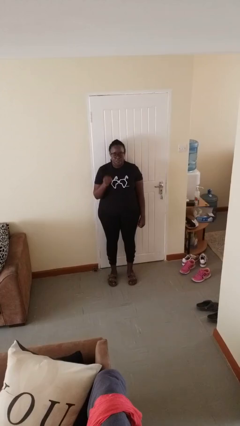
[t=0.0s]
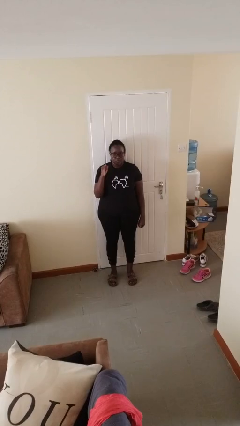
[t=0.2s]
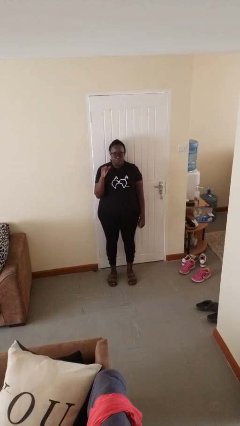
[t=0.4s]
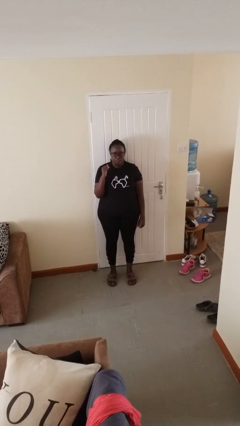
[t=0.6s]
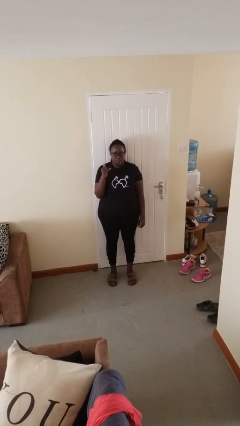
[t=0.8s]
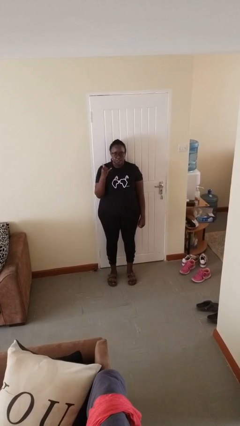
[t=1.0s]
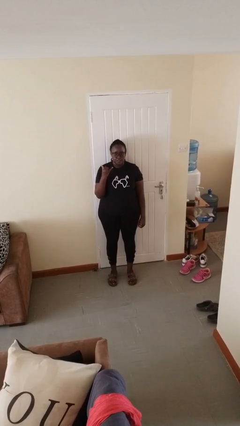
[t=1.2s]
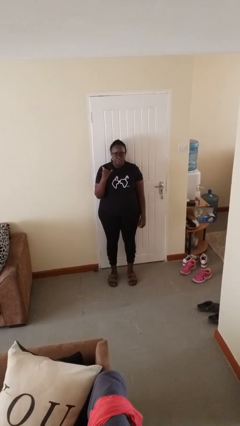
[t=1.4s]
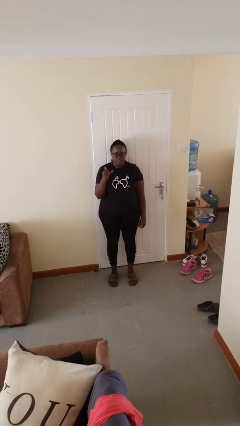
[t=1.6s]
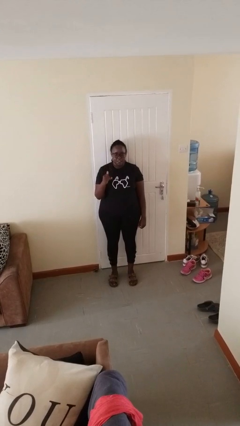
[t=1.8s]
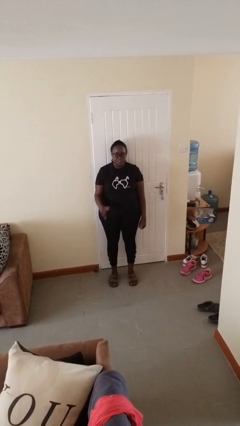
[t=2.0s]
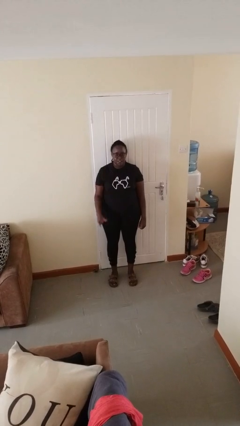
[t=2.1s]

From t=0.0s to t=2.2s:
person gestures hang loose

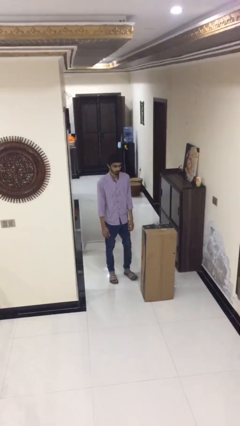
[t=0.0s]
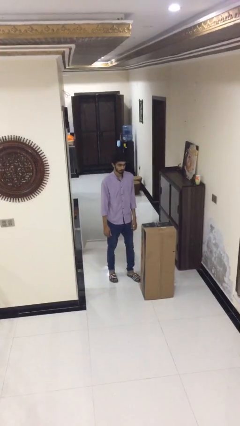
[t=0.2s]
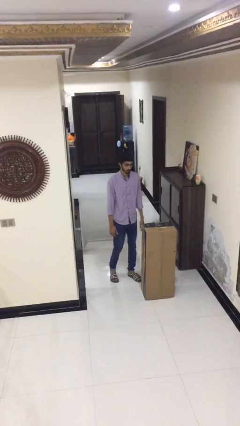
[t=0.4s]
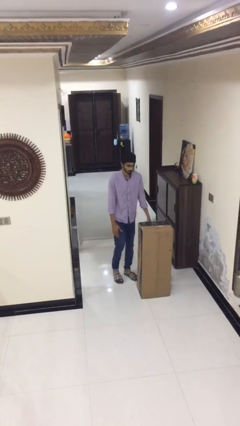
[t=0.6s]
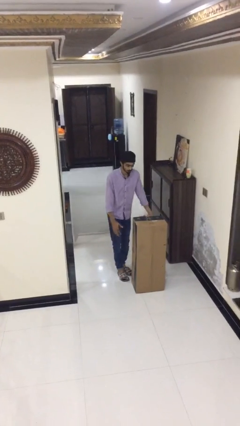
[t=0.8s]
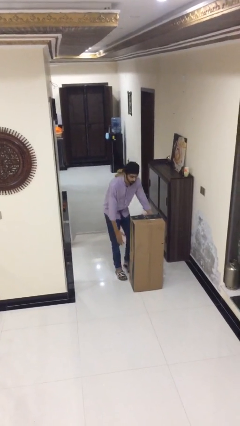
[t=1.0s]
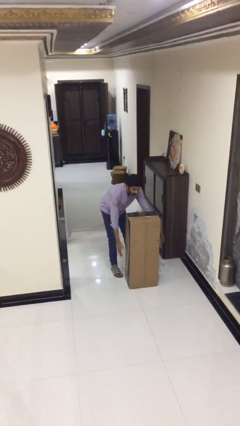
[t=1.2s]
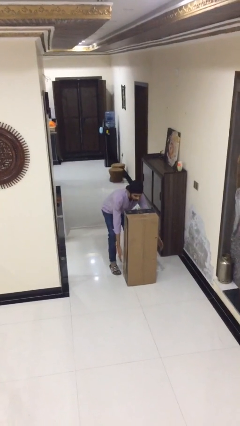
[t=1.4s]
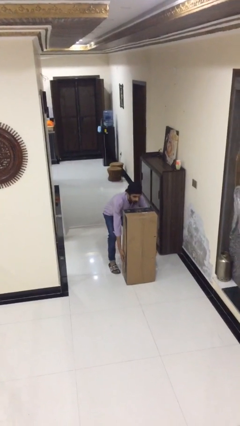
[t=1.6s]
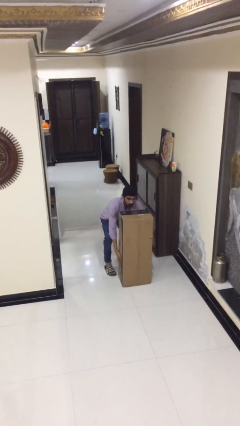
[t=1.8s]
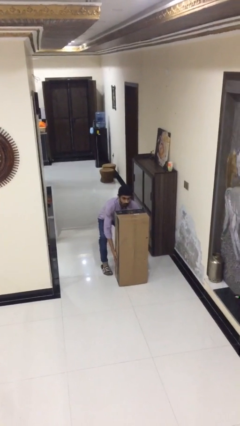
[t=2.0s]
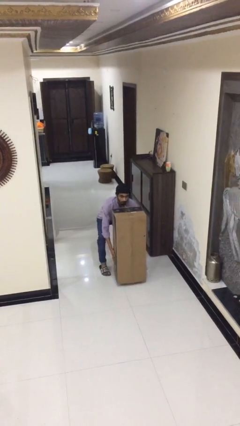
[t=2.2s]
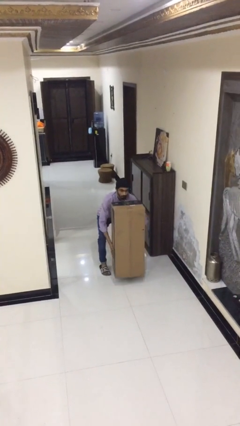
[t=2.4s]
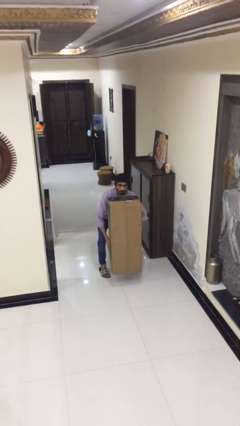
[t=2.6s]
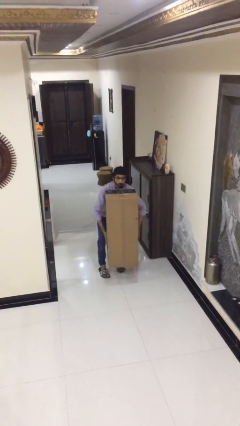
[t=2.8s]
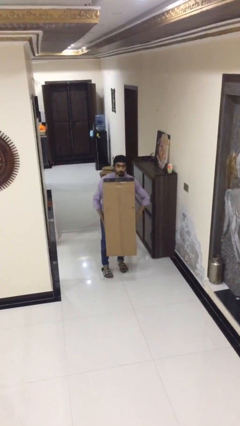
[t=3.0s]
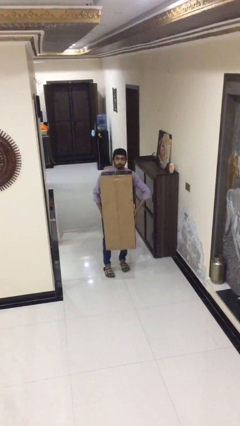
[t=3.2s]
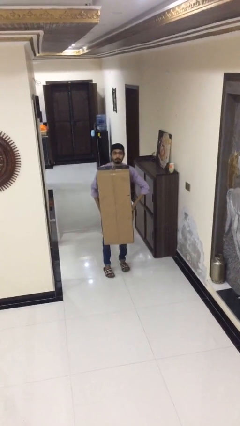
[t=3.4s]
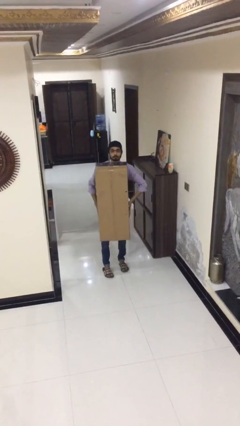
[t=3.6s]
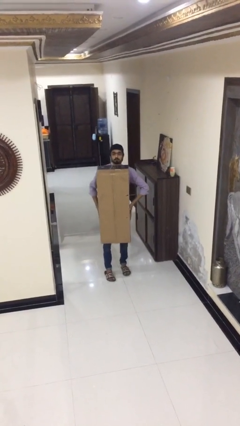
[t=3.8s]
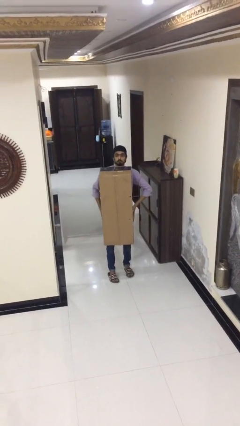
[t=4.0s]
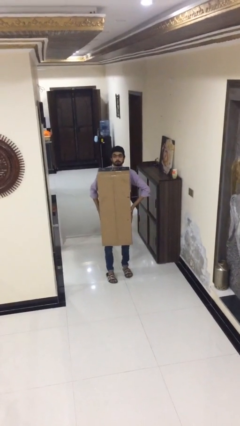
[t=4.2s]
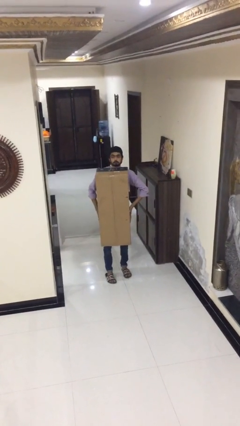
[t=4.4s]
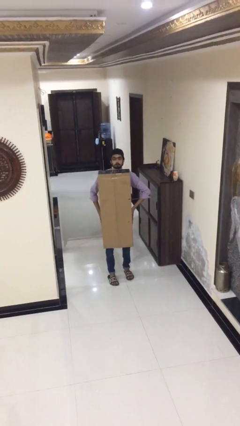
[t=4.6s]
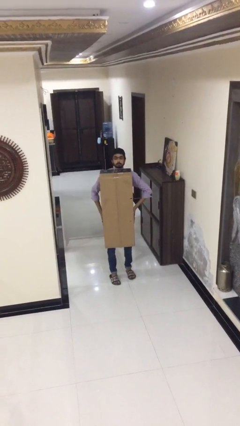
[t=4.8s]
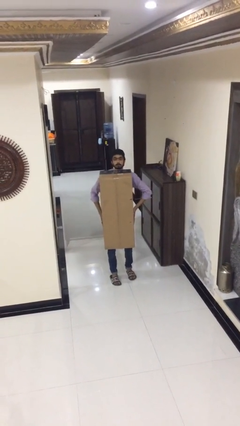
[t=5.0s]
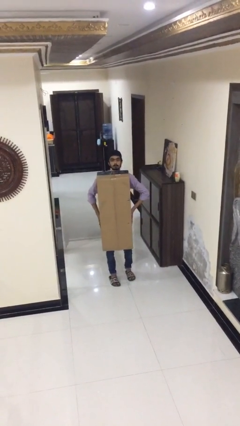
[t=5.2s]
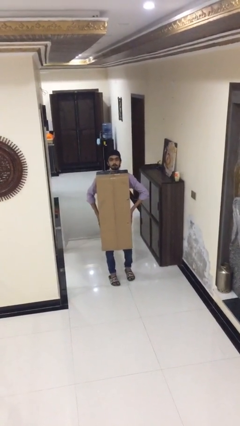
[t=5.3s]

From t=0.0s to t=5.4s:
person picks up object from floor

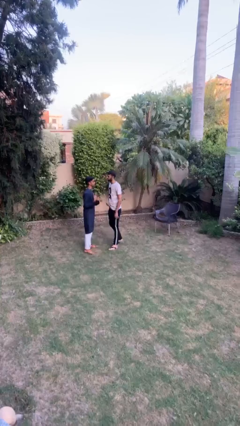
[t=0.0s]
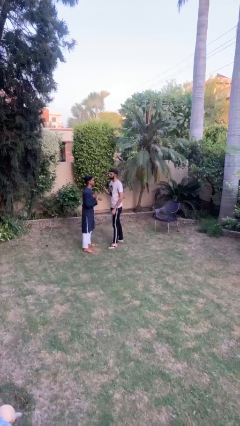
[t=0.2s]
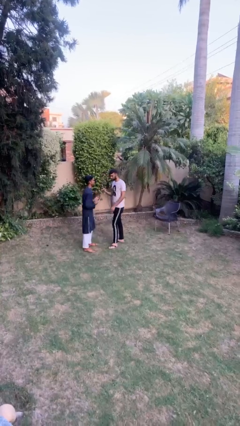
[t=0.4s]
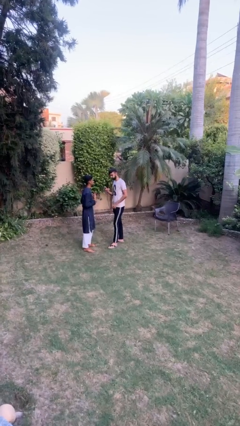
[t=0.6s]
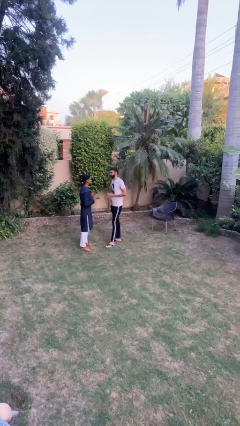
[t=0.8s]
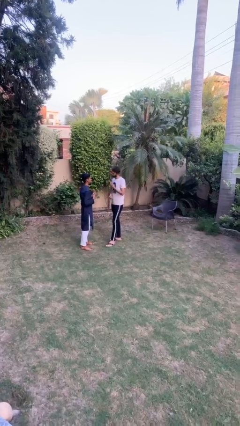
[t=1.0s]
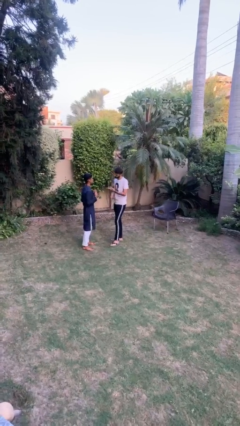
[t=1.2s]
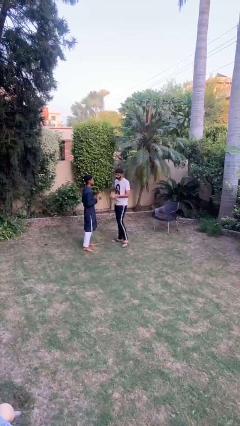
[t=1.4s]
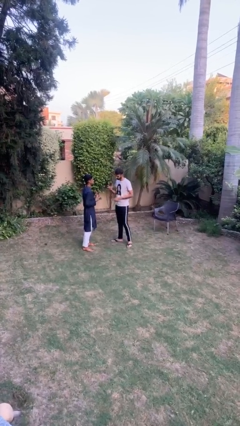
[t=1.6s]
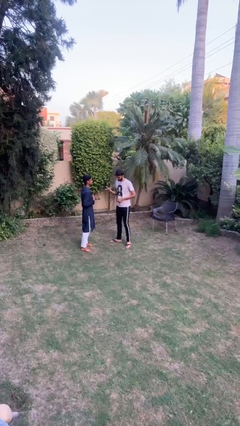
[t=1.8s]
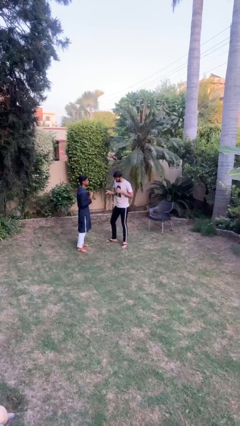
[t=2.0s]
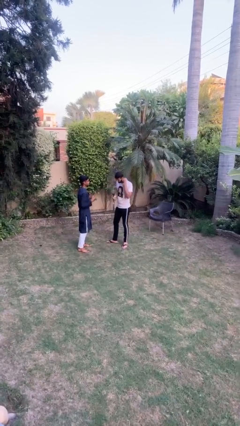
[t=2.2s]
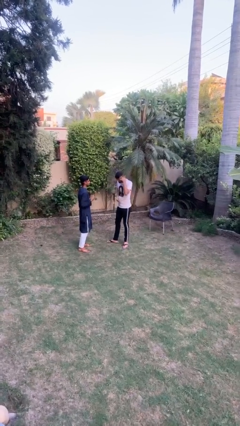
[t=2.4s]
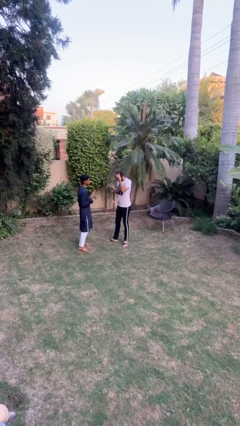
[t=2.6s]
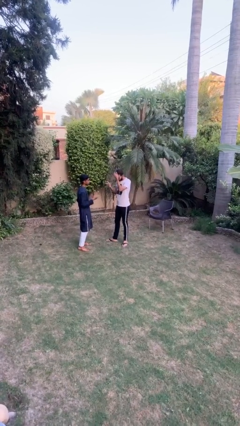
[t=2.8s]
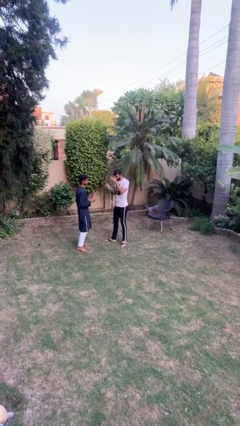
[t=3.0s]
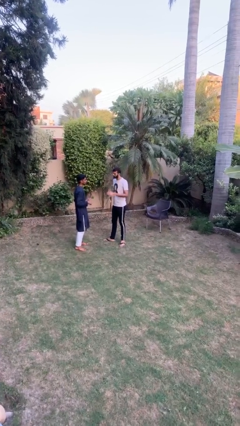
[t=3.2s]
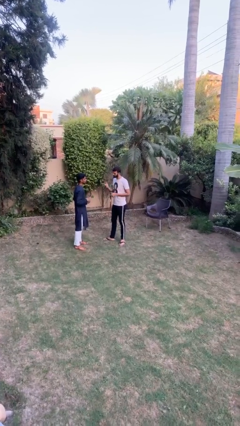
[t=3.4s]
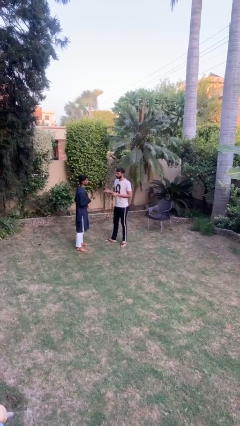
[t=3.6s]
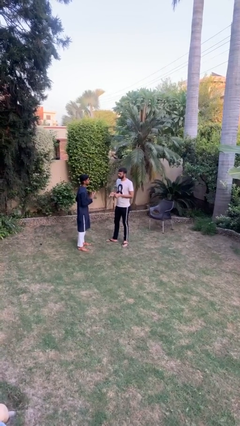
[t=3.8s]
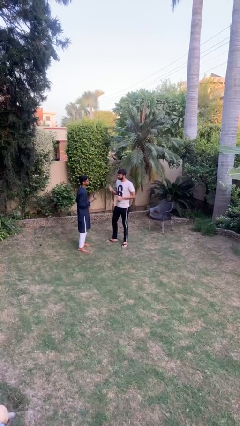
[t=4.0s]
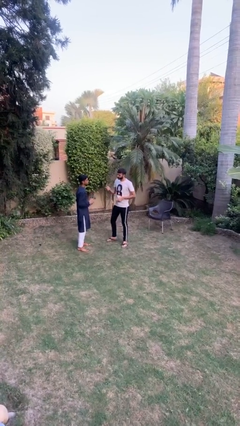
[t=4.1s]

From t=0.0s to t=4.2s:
person talks to person

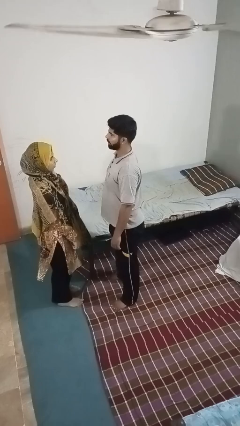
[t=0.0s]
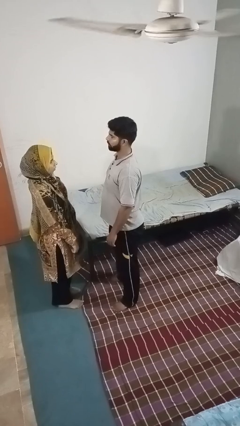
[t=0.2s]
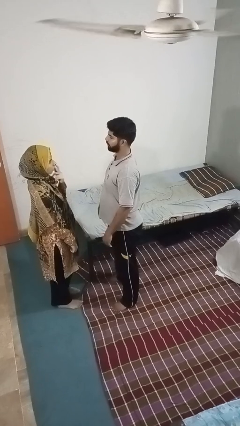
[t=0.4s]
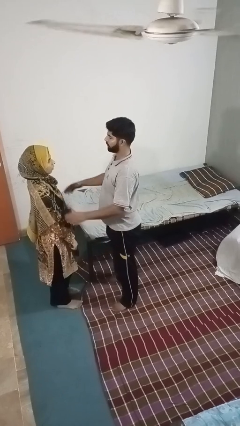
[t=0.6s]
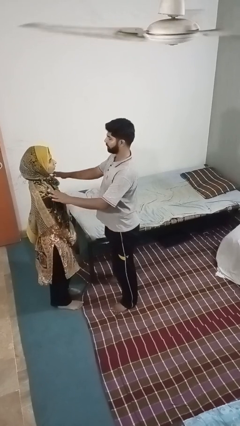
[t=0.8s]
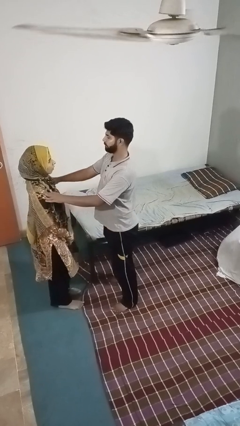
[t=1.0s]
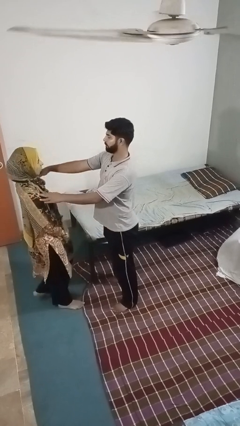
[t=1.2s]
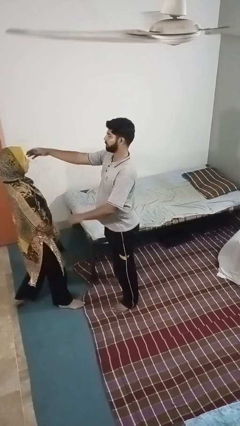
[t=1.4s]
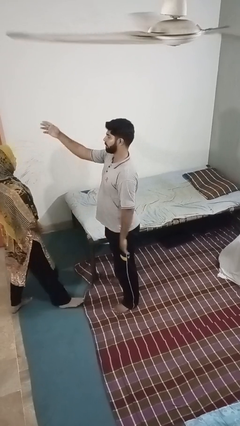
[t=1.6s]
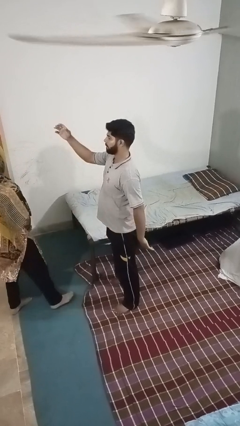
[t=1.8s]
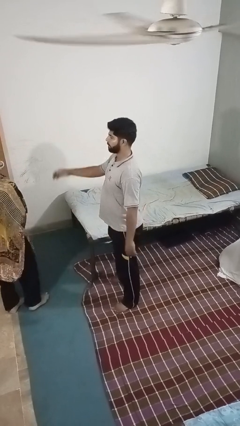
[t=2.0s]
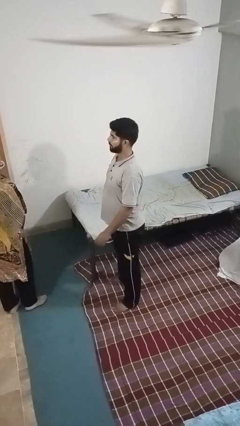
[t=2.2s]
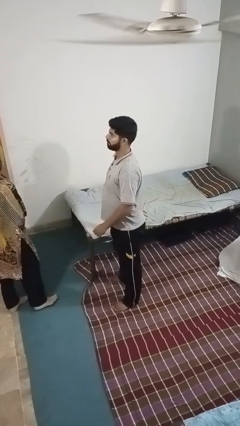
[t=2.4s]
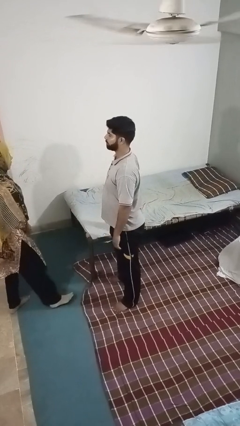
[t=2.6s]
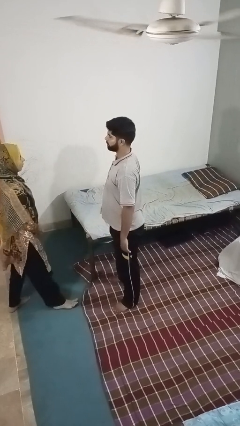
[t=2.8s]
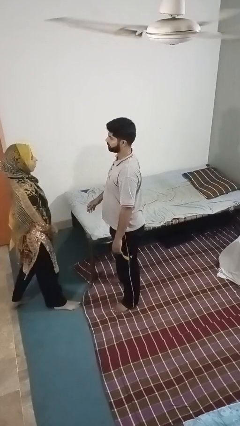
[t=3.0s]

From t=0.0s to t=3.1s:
person shoves person

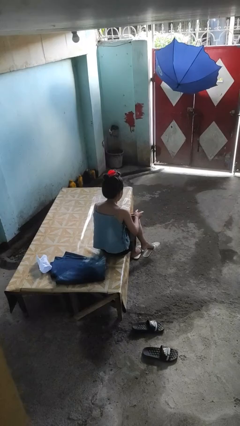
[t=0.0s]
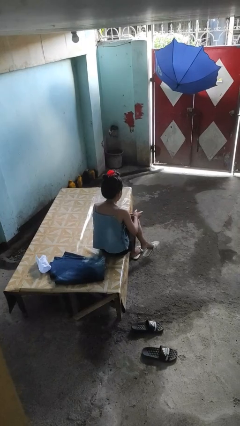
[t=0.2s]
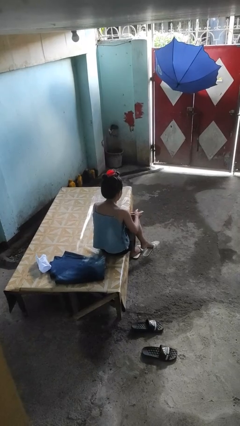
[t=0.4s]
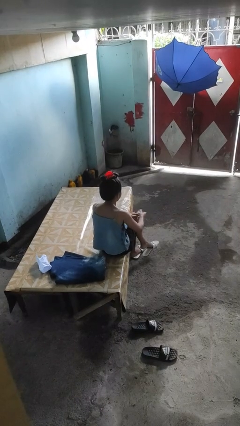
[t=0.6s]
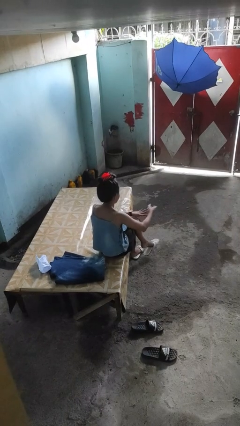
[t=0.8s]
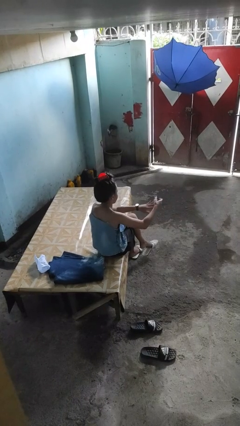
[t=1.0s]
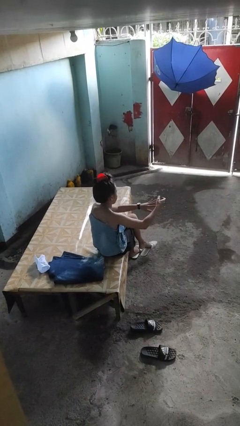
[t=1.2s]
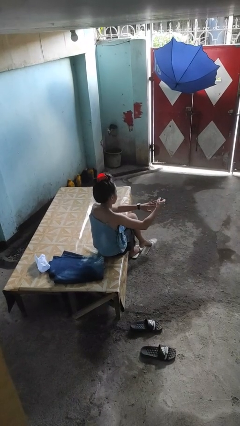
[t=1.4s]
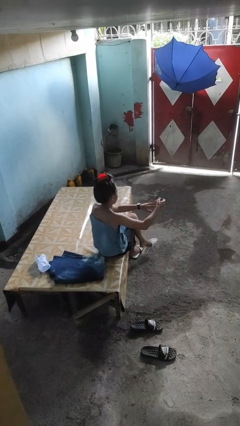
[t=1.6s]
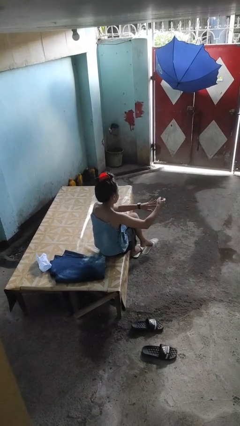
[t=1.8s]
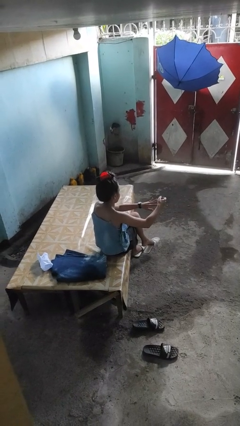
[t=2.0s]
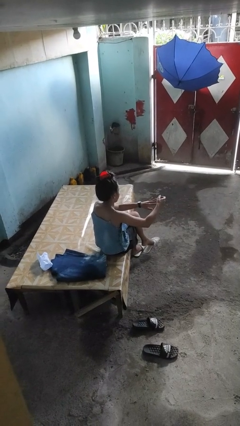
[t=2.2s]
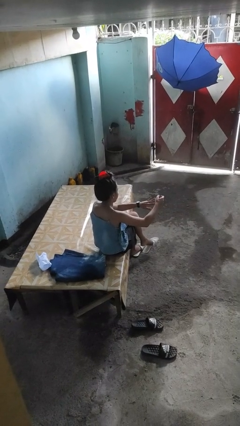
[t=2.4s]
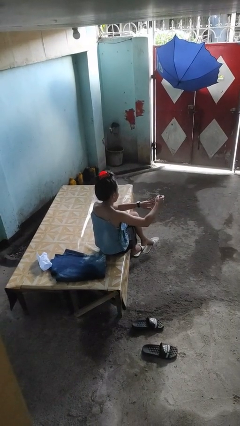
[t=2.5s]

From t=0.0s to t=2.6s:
person clips fingernails
